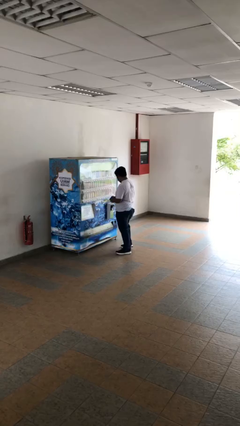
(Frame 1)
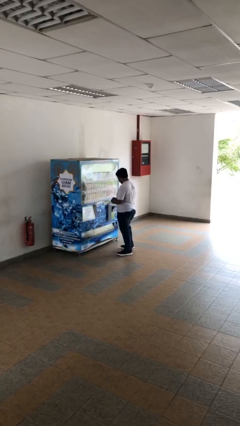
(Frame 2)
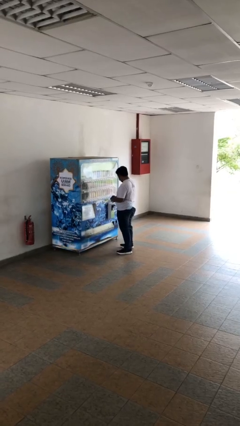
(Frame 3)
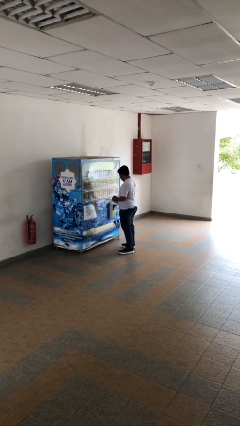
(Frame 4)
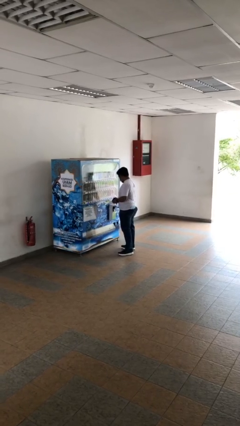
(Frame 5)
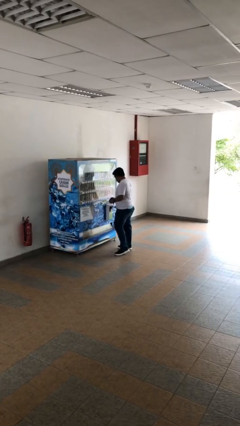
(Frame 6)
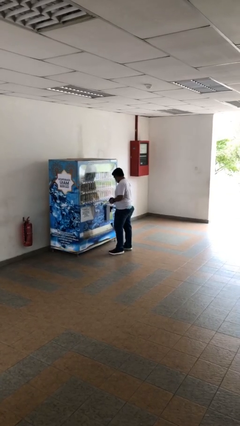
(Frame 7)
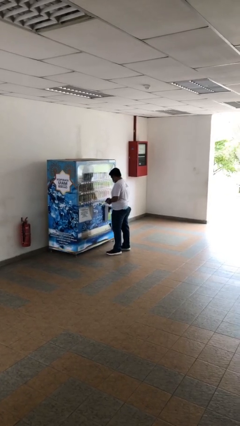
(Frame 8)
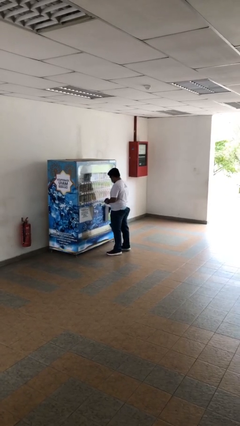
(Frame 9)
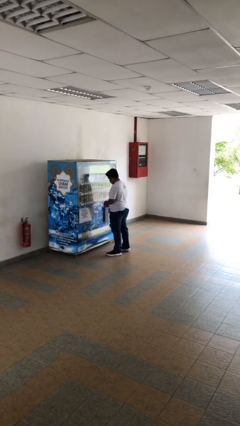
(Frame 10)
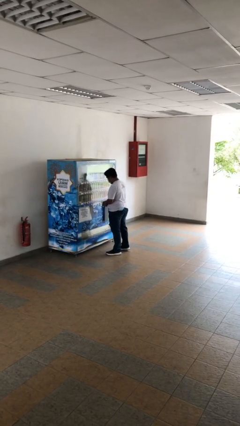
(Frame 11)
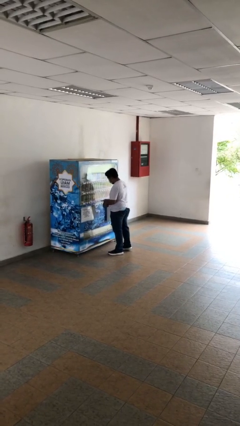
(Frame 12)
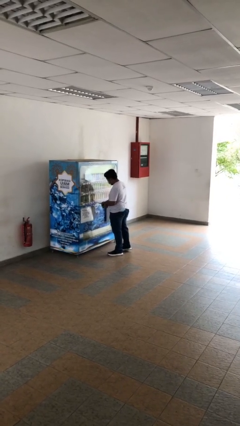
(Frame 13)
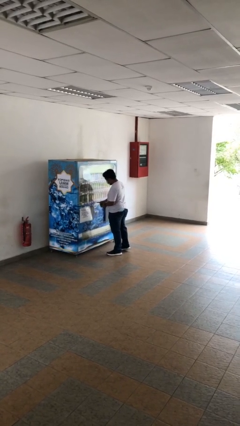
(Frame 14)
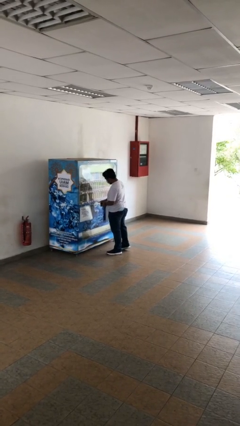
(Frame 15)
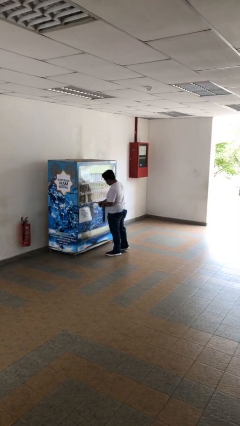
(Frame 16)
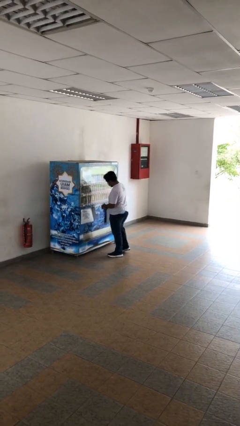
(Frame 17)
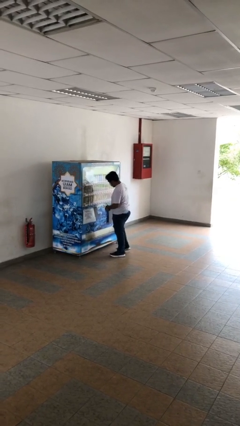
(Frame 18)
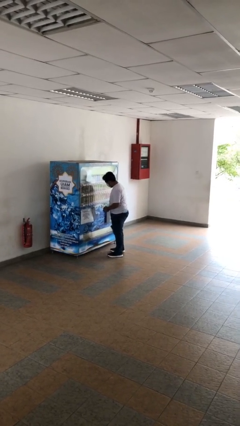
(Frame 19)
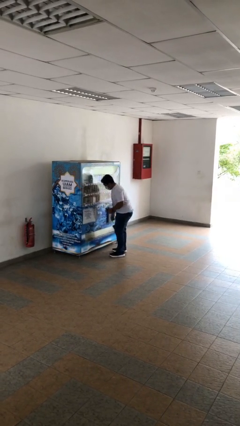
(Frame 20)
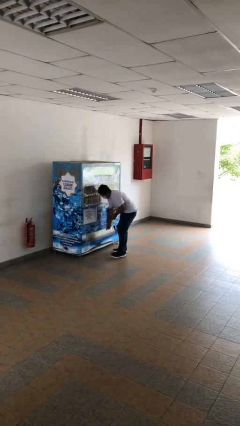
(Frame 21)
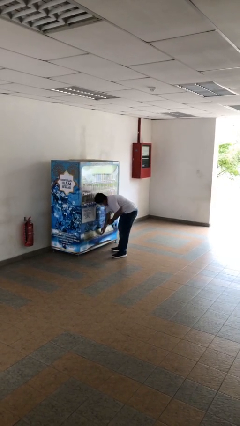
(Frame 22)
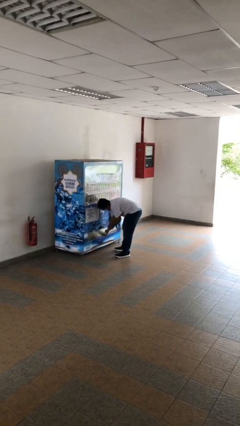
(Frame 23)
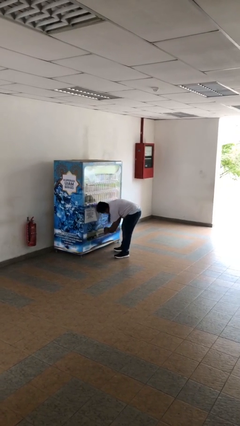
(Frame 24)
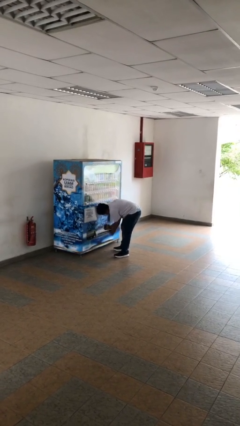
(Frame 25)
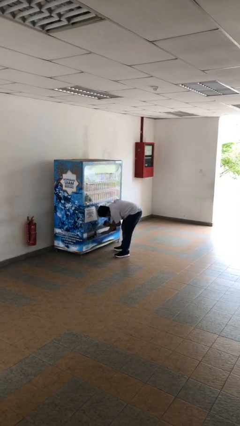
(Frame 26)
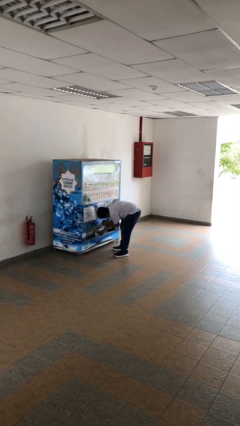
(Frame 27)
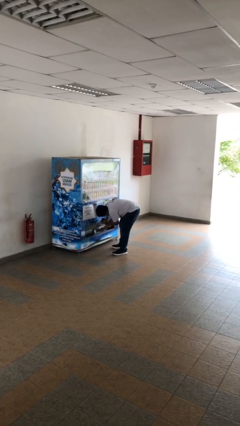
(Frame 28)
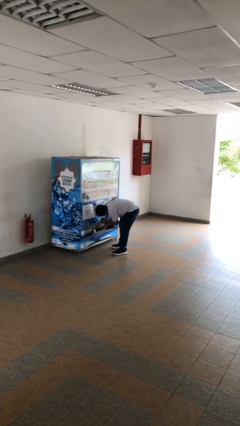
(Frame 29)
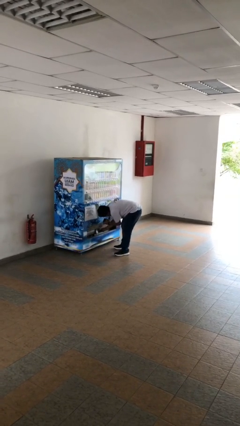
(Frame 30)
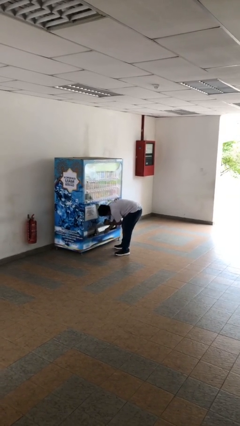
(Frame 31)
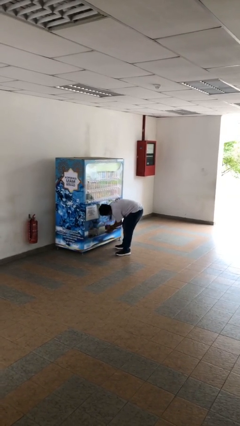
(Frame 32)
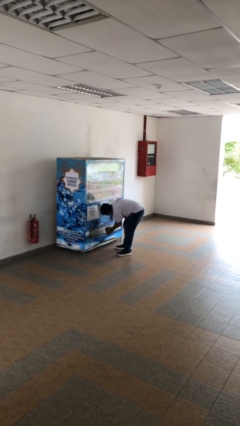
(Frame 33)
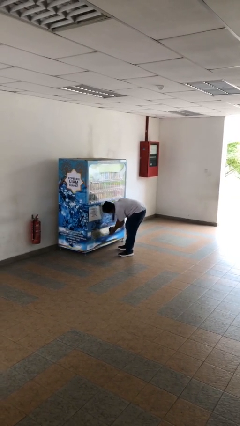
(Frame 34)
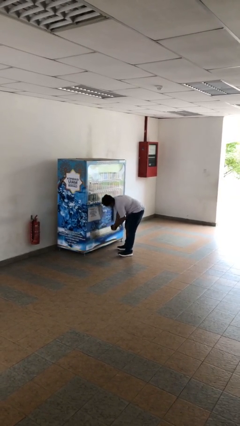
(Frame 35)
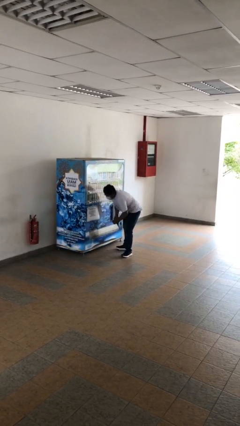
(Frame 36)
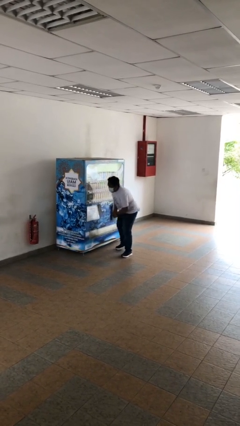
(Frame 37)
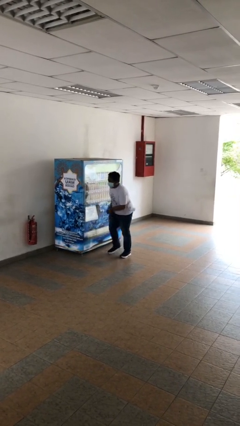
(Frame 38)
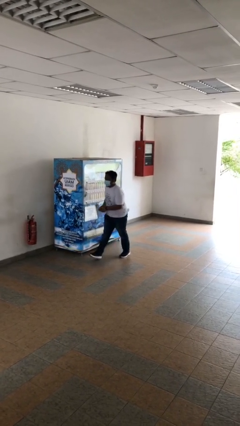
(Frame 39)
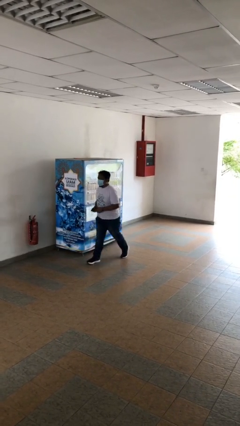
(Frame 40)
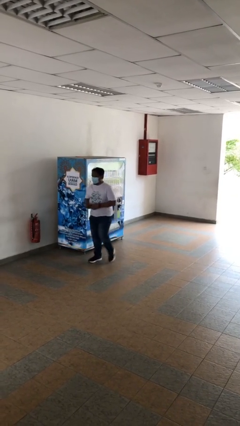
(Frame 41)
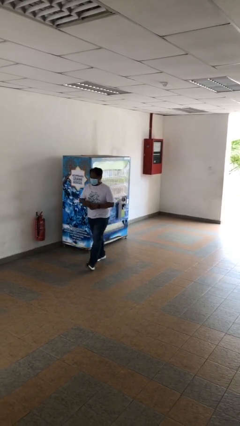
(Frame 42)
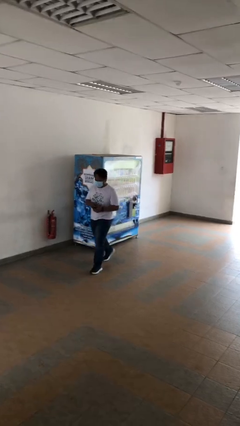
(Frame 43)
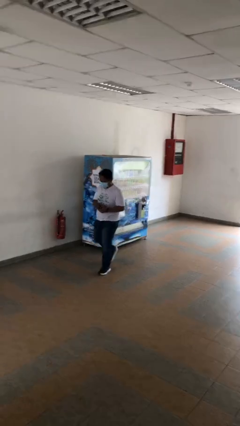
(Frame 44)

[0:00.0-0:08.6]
person purchases from machine

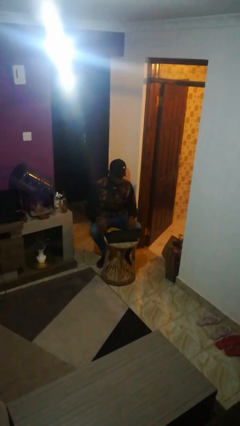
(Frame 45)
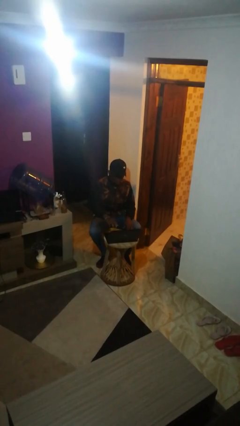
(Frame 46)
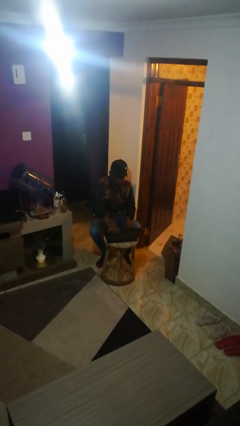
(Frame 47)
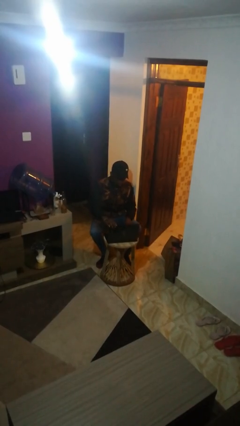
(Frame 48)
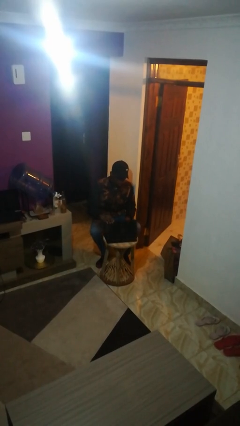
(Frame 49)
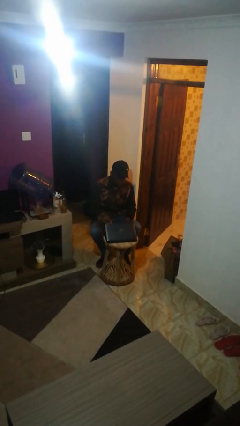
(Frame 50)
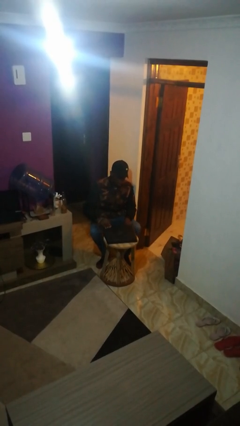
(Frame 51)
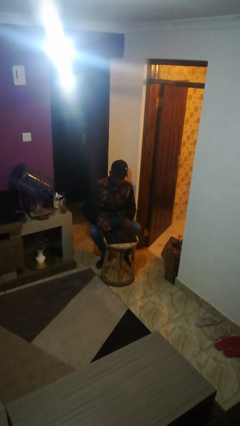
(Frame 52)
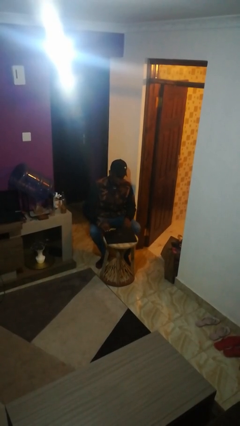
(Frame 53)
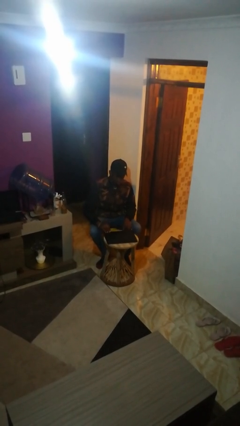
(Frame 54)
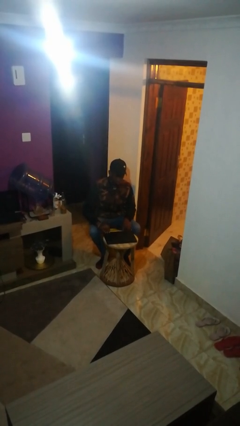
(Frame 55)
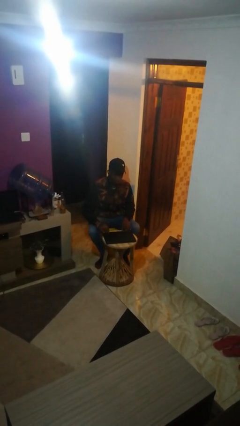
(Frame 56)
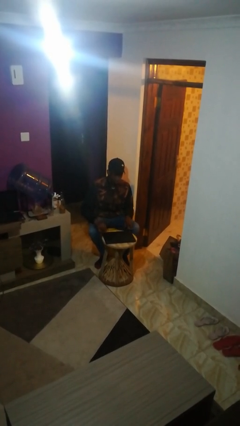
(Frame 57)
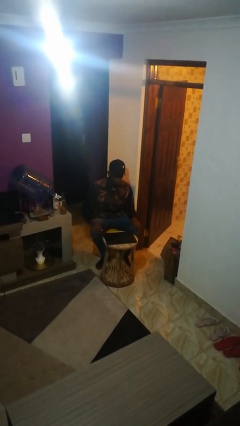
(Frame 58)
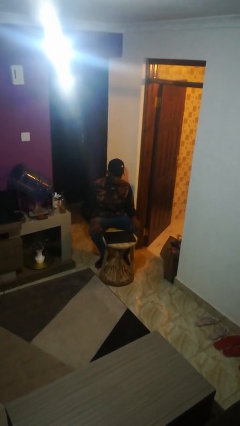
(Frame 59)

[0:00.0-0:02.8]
person closes laptop

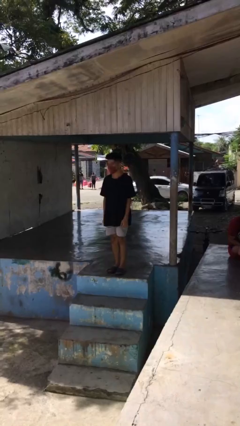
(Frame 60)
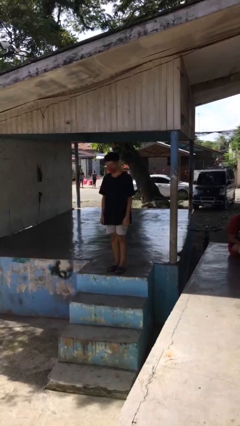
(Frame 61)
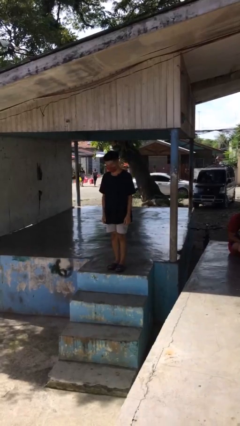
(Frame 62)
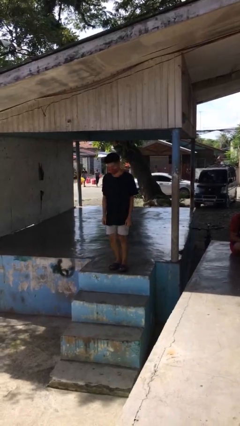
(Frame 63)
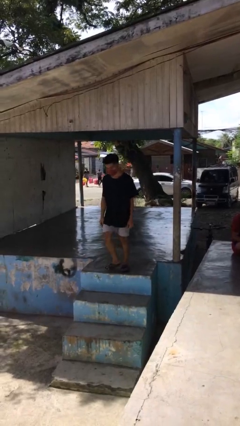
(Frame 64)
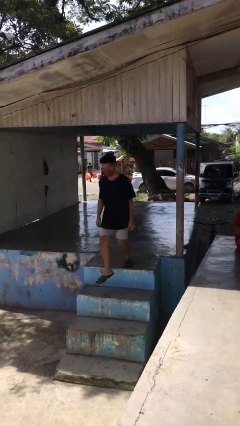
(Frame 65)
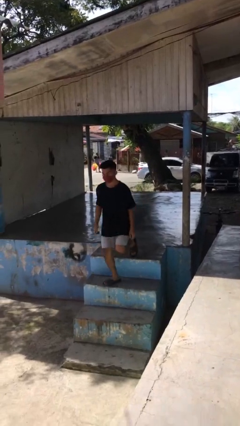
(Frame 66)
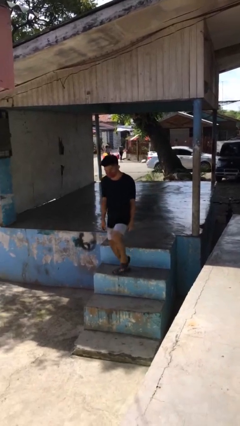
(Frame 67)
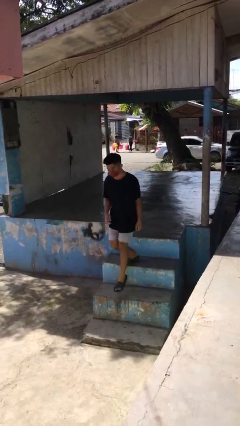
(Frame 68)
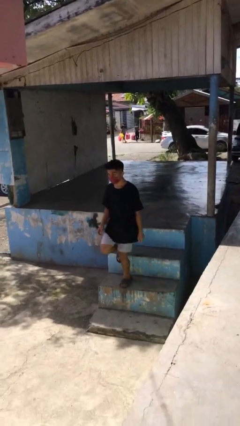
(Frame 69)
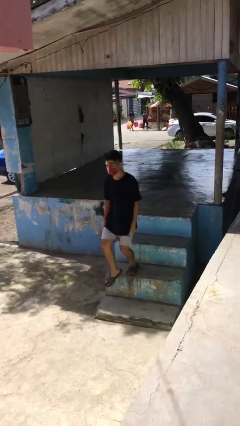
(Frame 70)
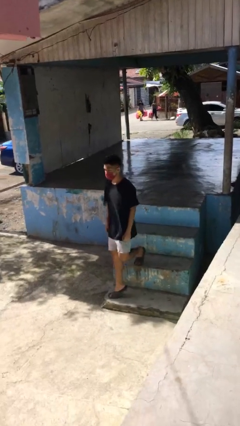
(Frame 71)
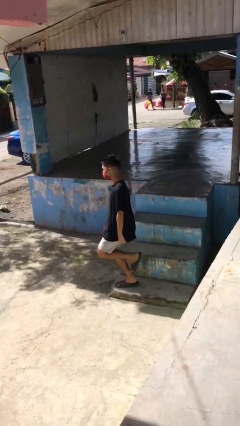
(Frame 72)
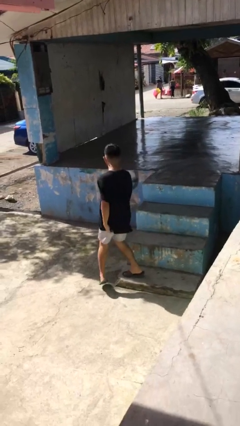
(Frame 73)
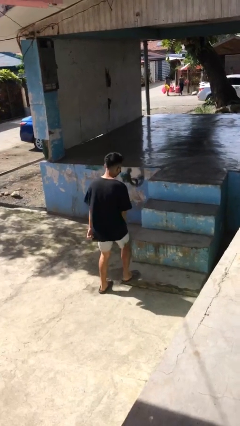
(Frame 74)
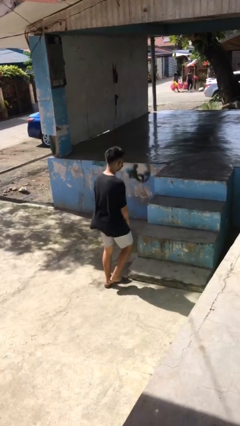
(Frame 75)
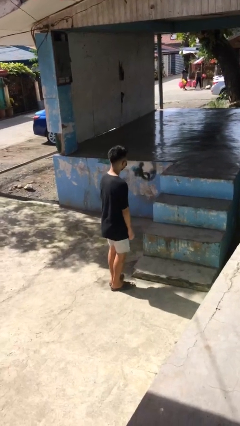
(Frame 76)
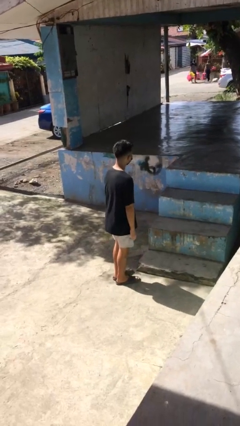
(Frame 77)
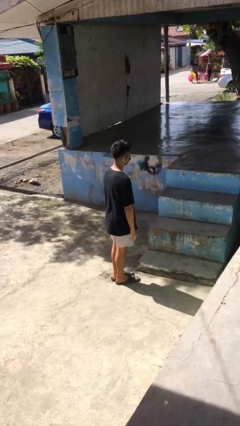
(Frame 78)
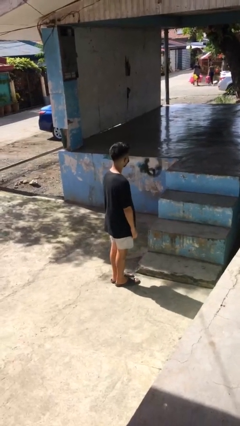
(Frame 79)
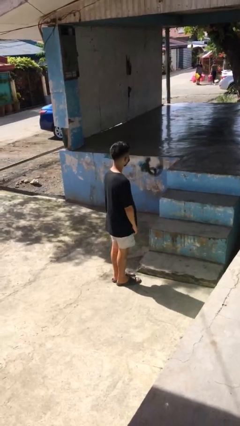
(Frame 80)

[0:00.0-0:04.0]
person climbs down stairs

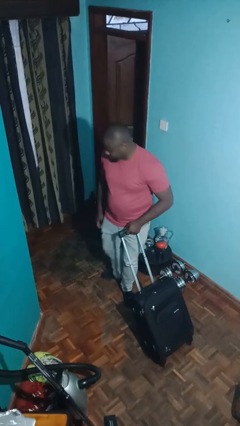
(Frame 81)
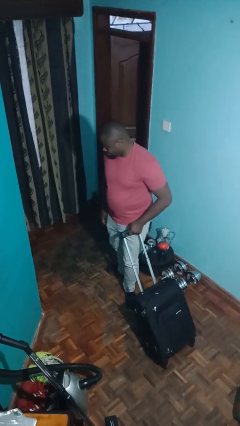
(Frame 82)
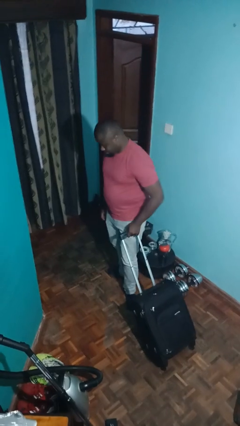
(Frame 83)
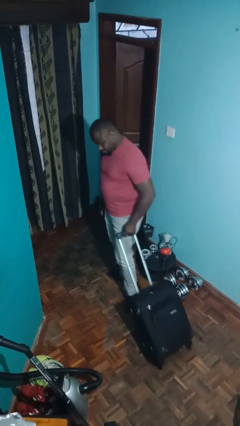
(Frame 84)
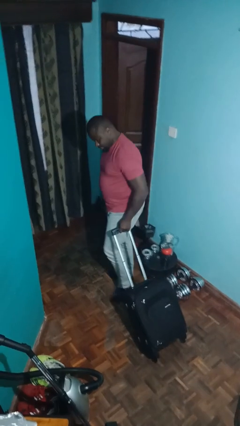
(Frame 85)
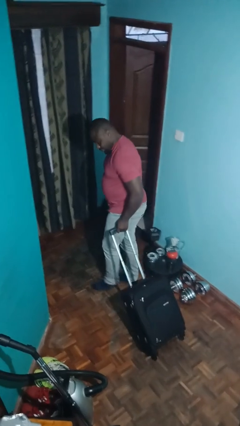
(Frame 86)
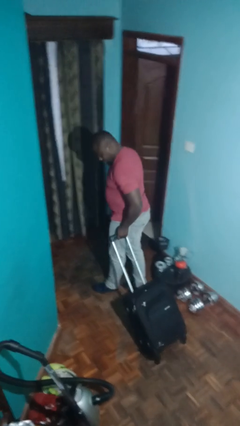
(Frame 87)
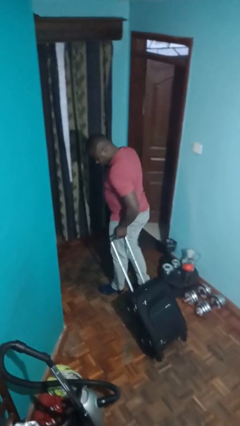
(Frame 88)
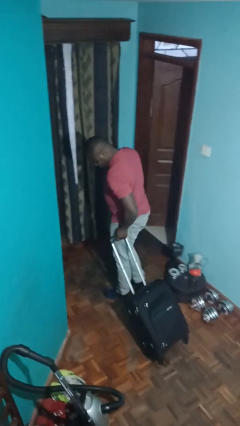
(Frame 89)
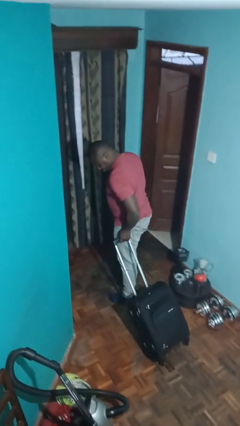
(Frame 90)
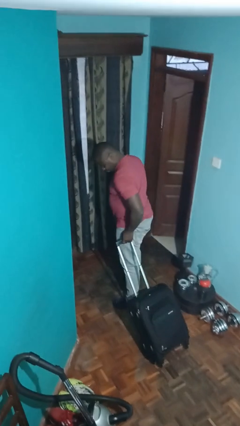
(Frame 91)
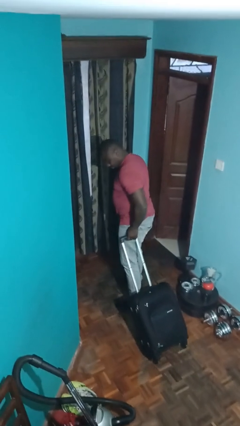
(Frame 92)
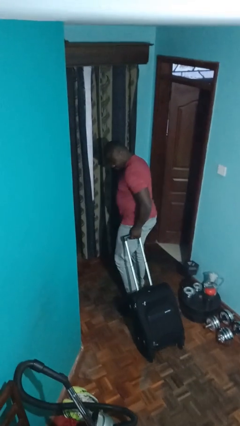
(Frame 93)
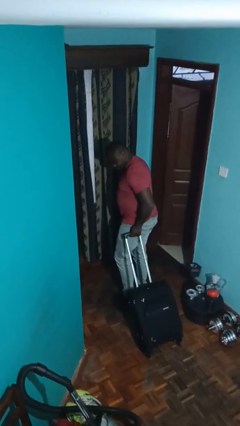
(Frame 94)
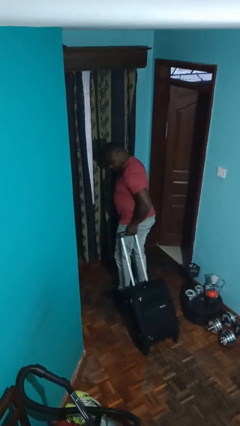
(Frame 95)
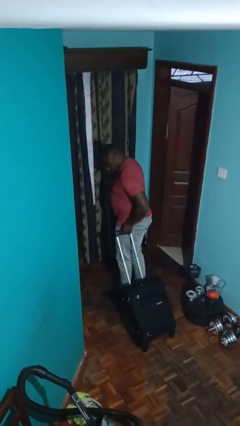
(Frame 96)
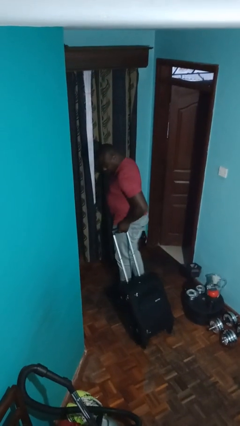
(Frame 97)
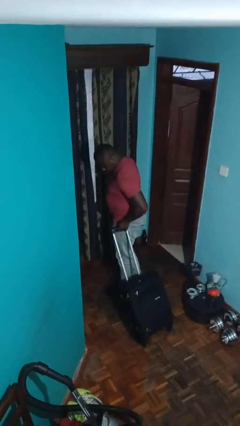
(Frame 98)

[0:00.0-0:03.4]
person pulls wheeled cart
